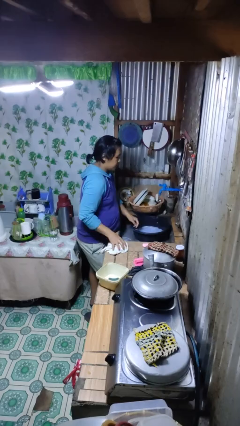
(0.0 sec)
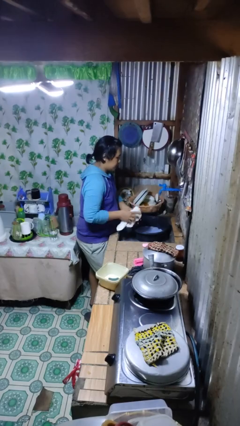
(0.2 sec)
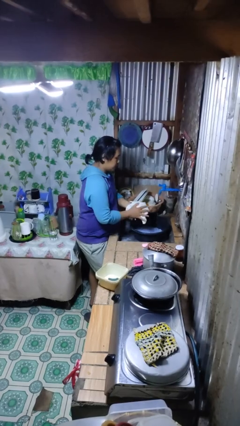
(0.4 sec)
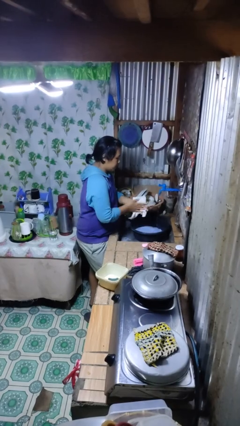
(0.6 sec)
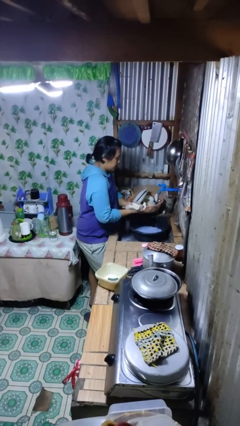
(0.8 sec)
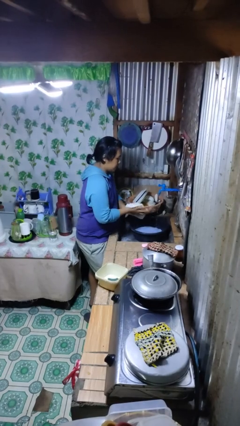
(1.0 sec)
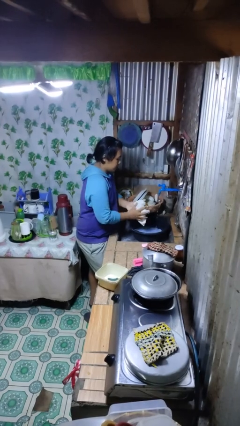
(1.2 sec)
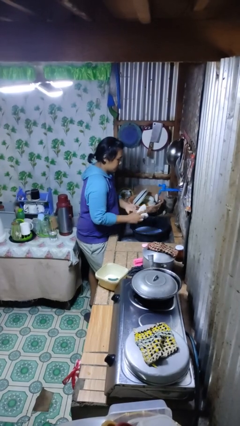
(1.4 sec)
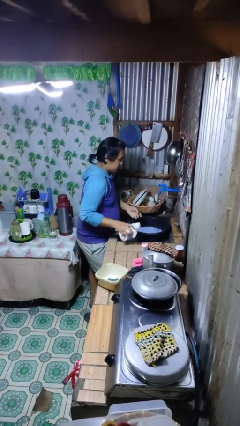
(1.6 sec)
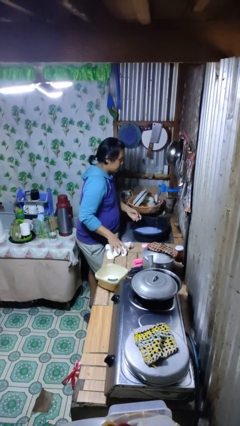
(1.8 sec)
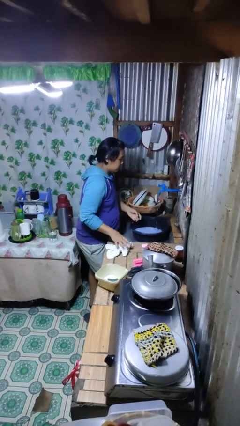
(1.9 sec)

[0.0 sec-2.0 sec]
person dries hands with towel

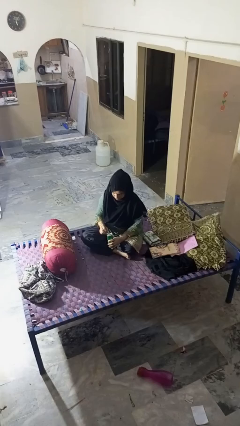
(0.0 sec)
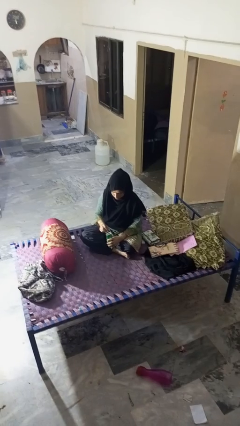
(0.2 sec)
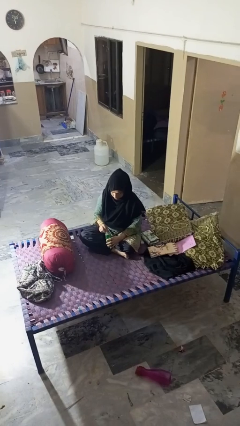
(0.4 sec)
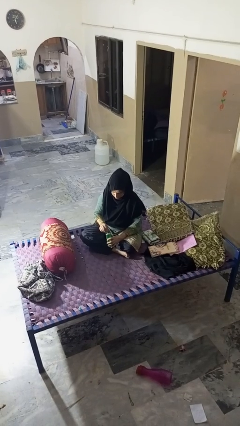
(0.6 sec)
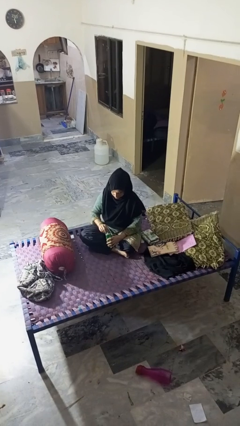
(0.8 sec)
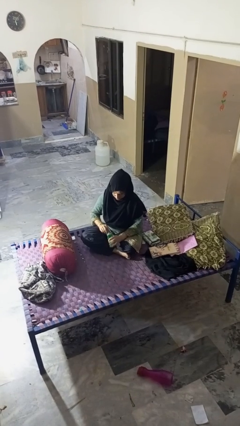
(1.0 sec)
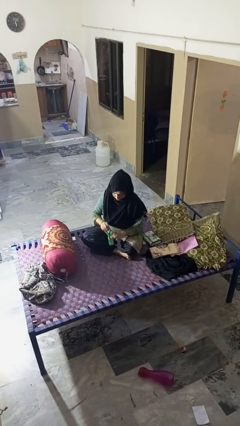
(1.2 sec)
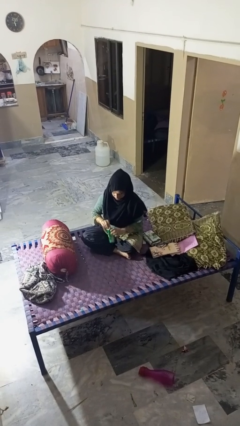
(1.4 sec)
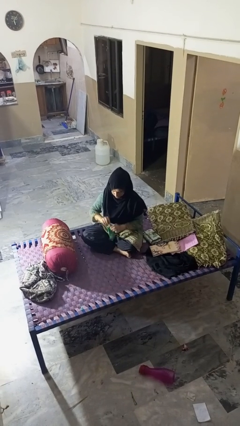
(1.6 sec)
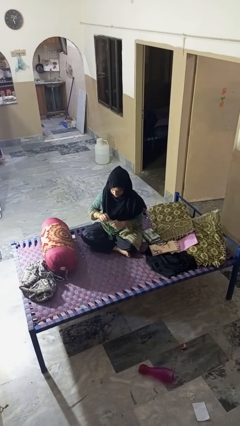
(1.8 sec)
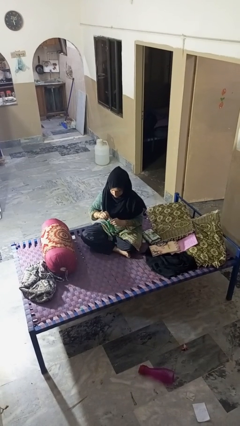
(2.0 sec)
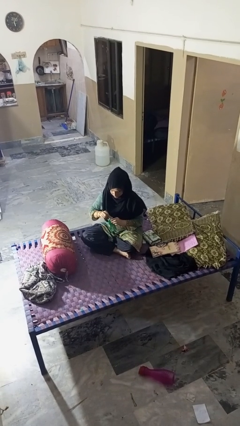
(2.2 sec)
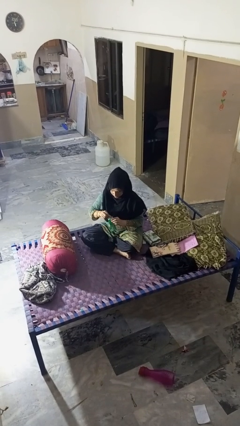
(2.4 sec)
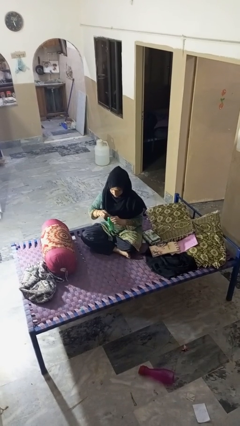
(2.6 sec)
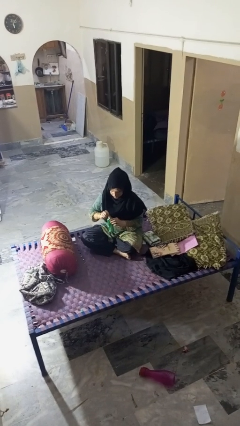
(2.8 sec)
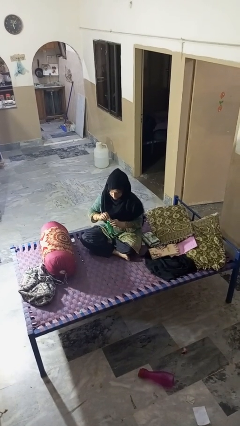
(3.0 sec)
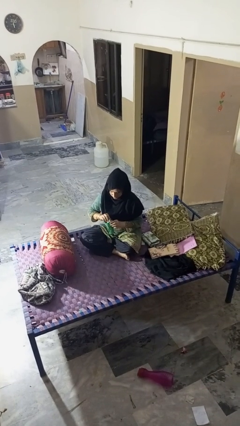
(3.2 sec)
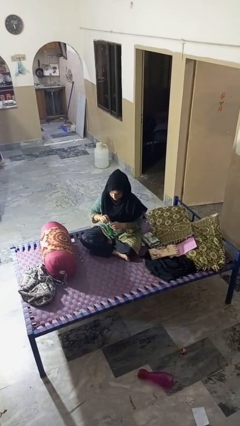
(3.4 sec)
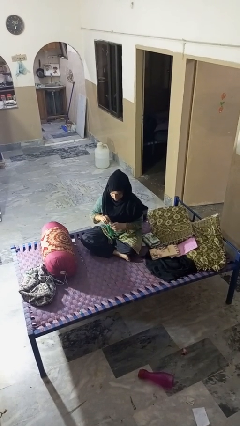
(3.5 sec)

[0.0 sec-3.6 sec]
person opens can with can opener

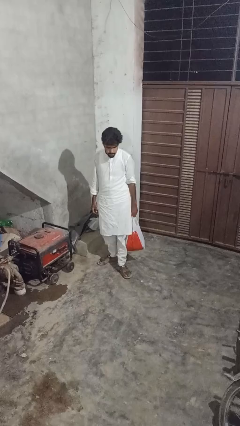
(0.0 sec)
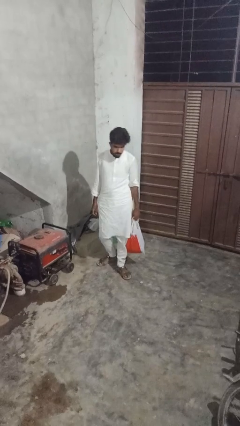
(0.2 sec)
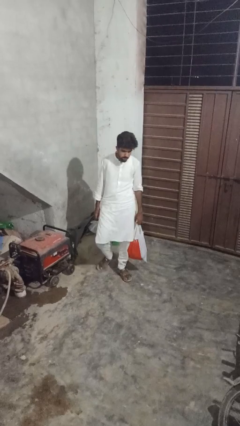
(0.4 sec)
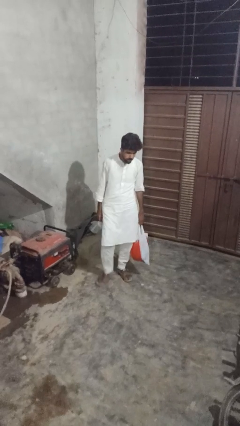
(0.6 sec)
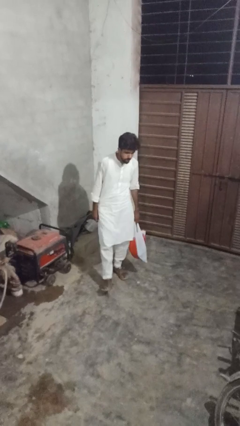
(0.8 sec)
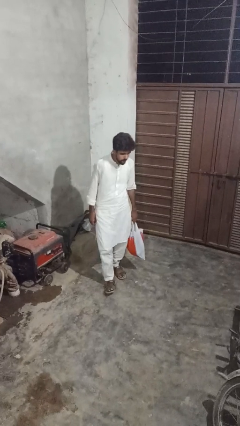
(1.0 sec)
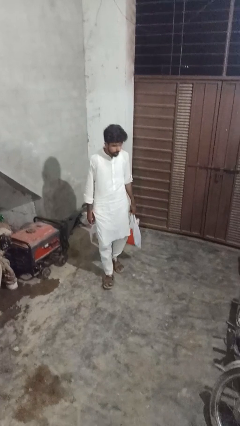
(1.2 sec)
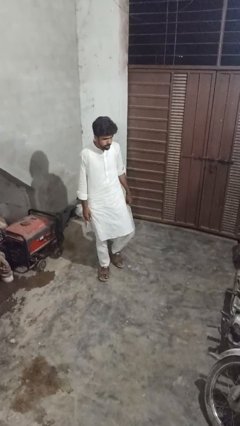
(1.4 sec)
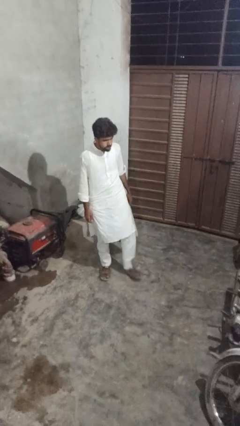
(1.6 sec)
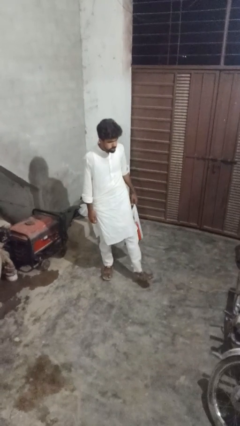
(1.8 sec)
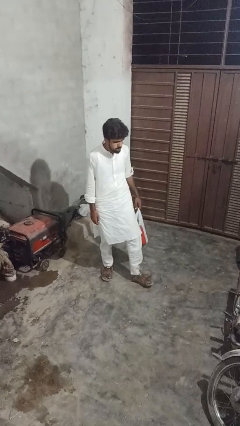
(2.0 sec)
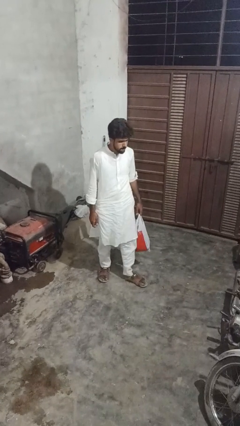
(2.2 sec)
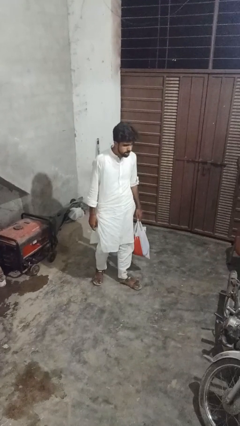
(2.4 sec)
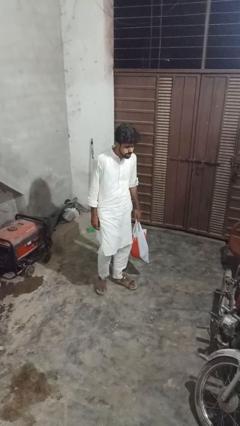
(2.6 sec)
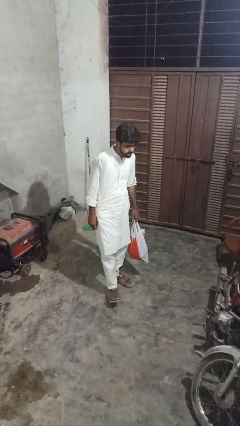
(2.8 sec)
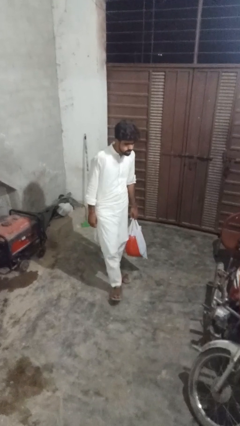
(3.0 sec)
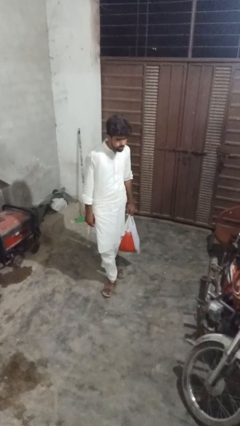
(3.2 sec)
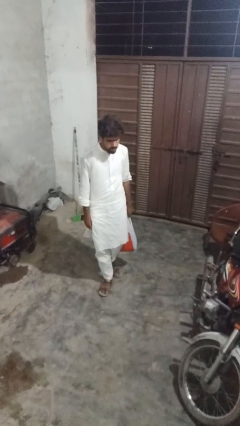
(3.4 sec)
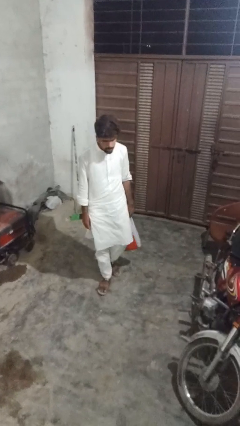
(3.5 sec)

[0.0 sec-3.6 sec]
person carries groceries

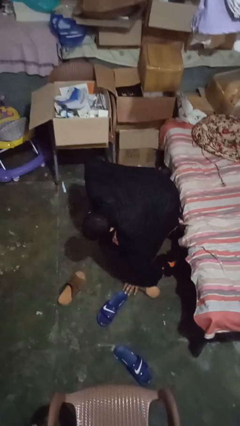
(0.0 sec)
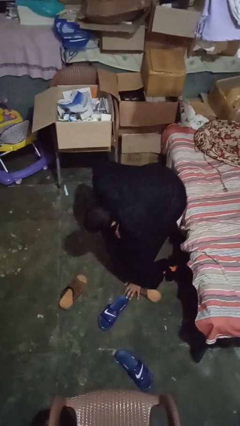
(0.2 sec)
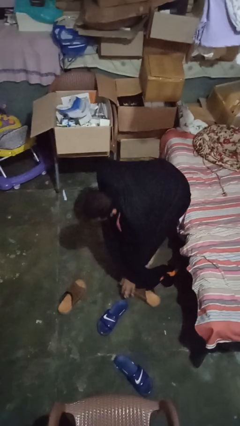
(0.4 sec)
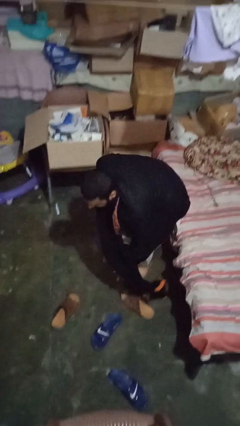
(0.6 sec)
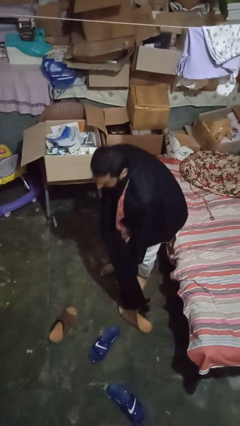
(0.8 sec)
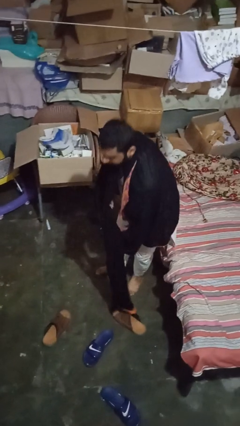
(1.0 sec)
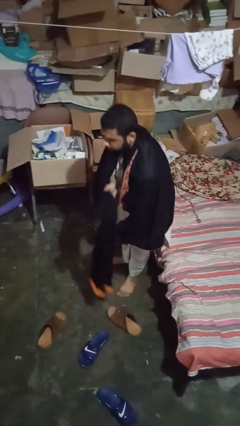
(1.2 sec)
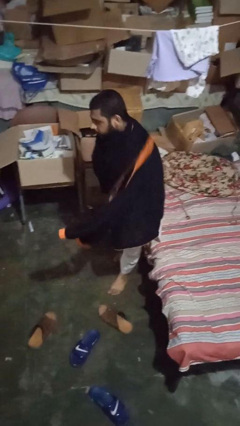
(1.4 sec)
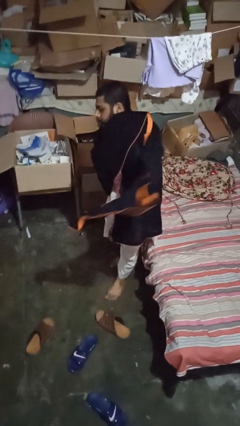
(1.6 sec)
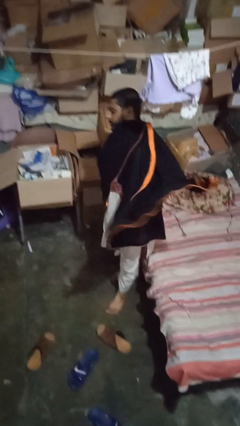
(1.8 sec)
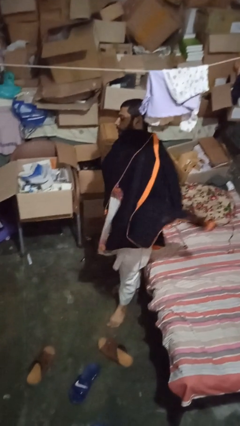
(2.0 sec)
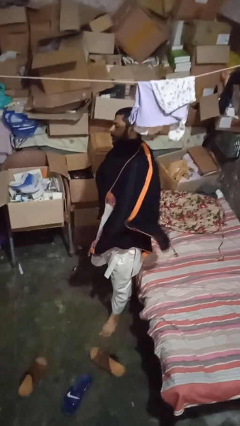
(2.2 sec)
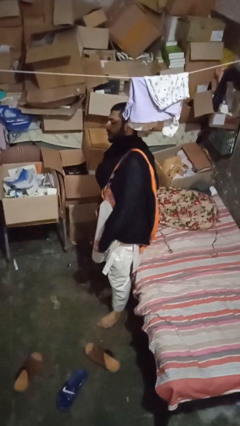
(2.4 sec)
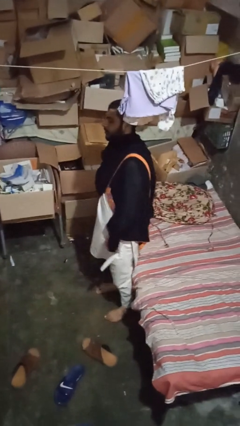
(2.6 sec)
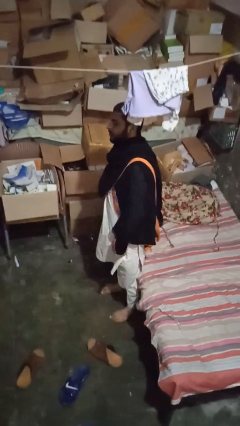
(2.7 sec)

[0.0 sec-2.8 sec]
person stands up from floor

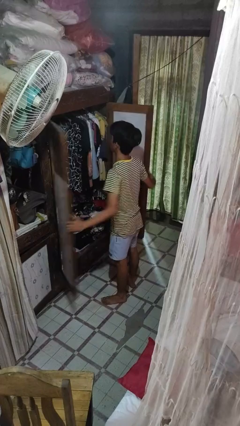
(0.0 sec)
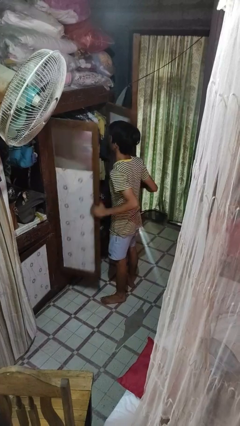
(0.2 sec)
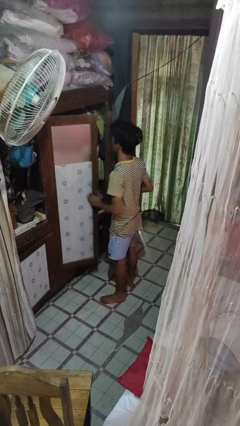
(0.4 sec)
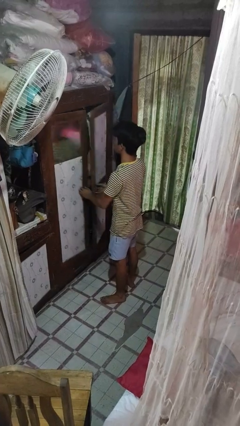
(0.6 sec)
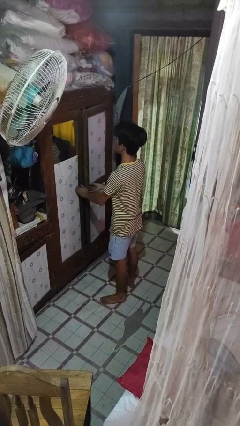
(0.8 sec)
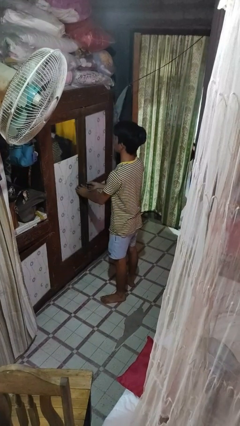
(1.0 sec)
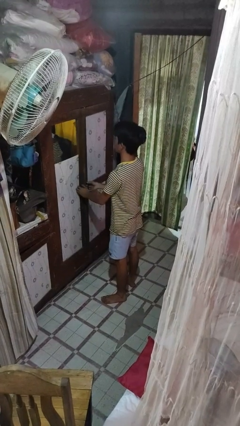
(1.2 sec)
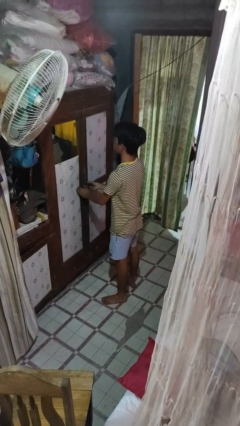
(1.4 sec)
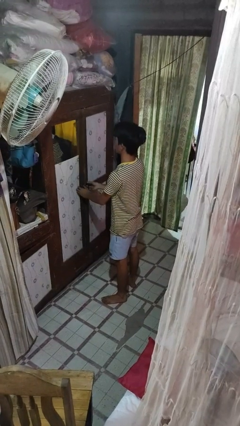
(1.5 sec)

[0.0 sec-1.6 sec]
person closes closet door

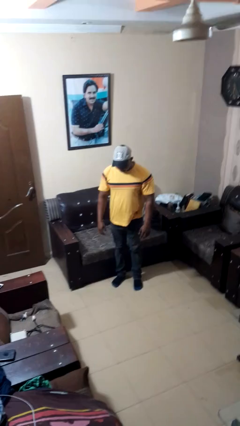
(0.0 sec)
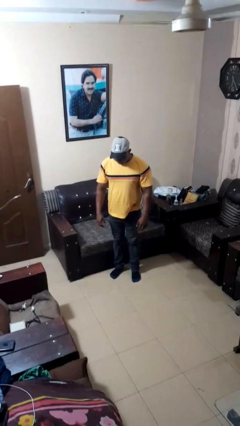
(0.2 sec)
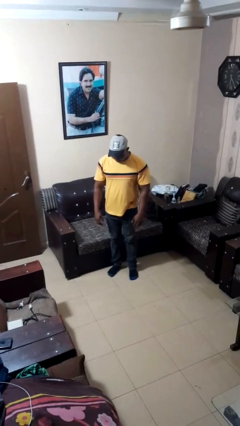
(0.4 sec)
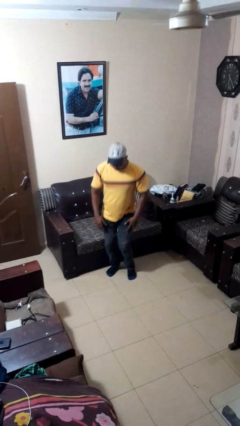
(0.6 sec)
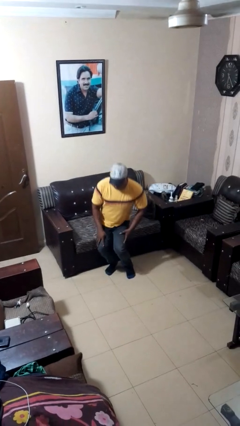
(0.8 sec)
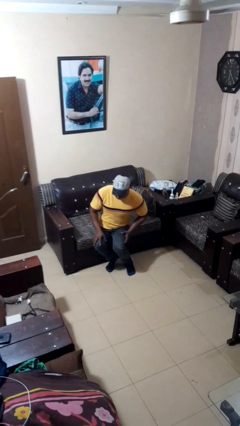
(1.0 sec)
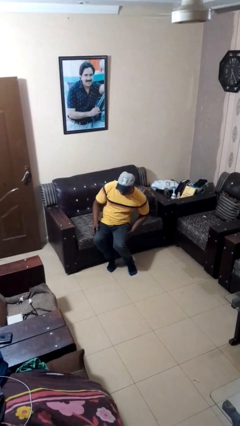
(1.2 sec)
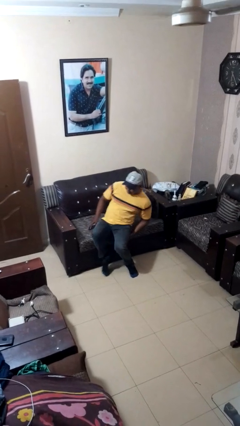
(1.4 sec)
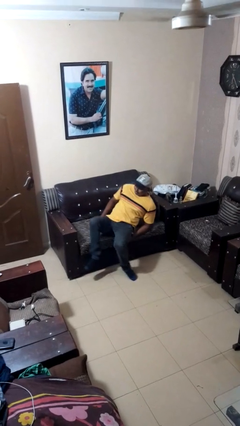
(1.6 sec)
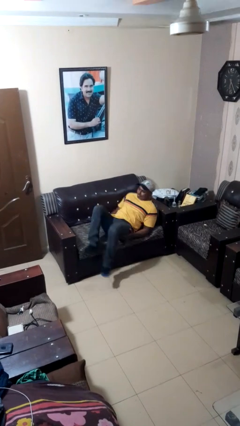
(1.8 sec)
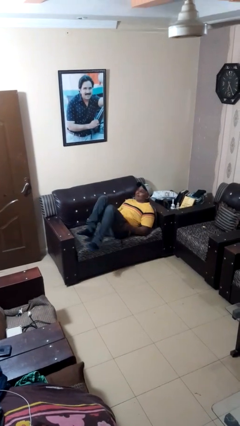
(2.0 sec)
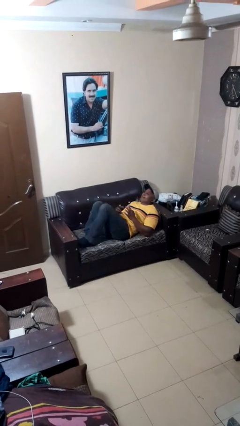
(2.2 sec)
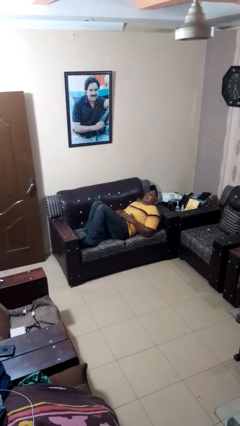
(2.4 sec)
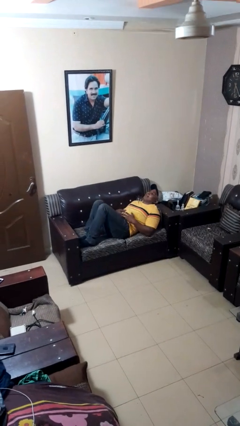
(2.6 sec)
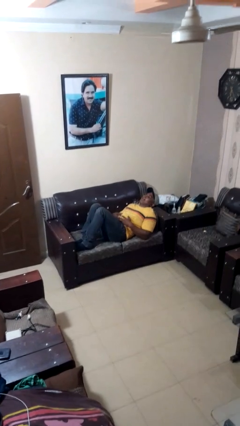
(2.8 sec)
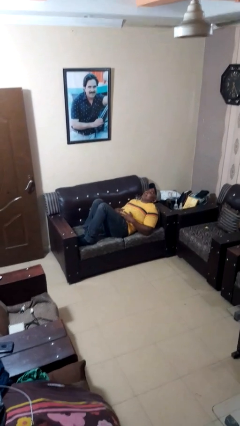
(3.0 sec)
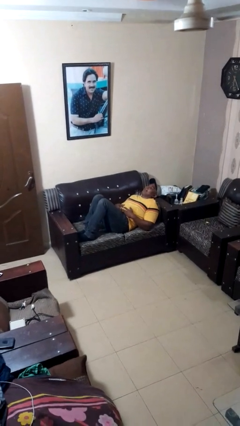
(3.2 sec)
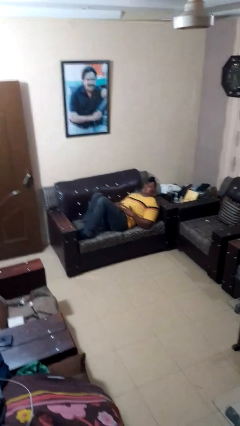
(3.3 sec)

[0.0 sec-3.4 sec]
person lies down on couch
